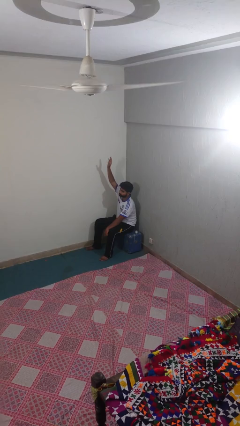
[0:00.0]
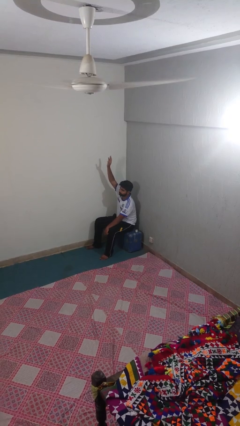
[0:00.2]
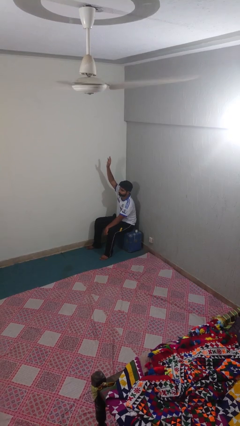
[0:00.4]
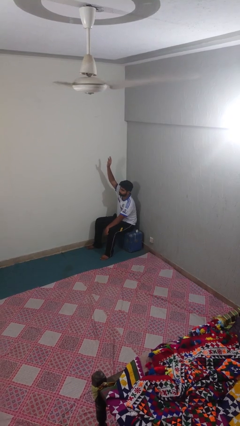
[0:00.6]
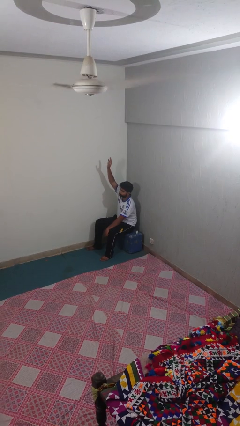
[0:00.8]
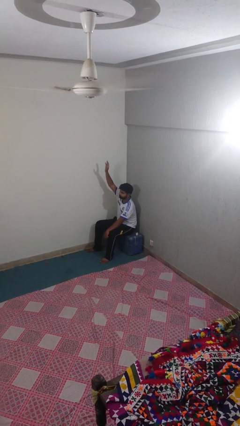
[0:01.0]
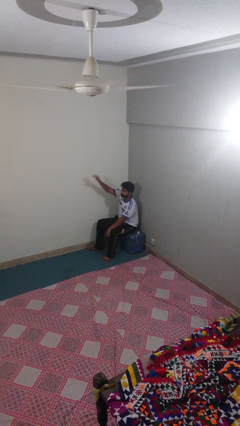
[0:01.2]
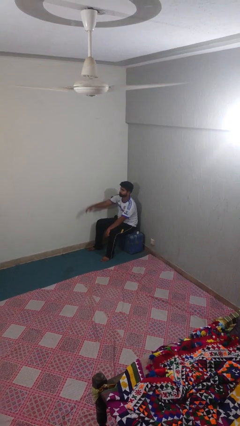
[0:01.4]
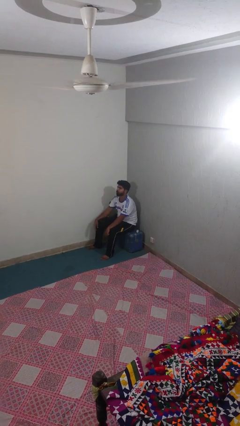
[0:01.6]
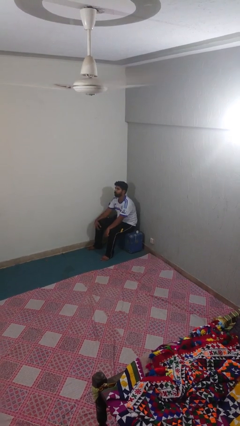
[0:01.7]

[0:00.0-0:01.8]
person gestures lower hand

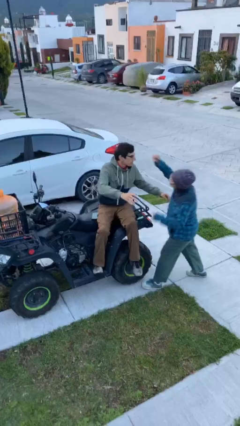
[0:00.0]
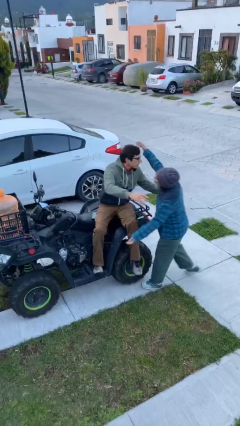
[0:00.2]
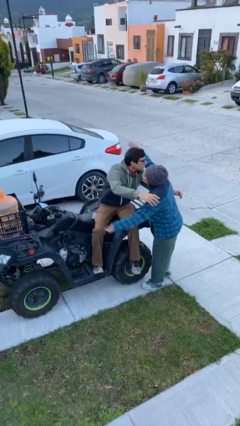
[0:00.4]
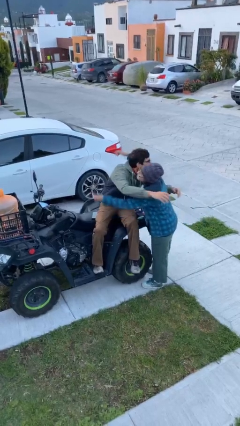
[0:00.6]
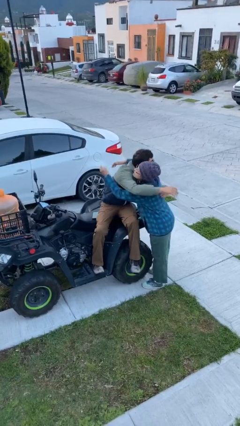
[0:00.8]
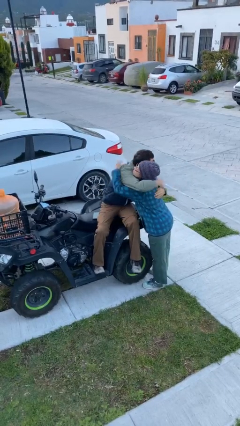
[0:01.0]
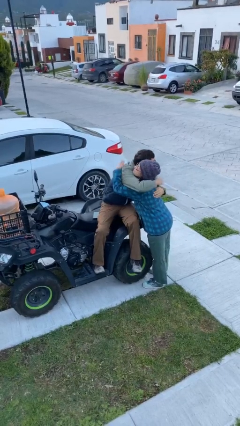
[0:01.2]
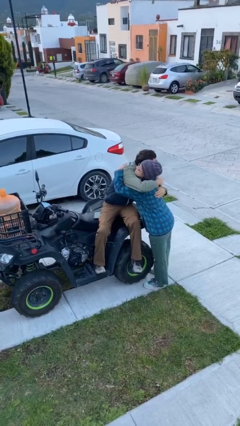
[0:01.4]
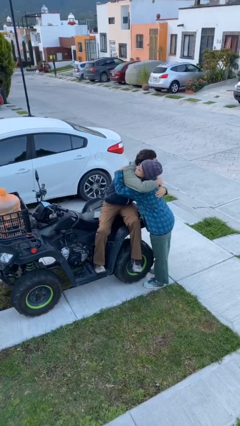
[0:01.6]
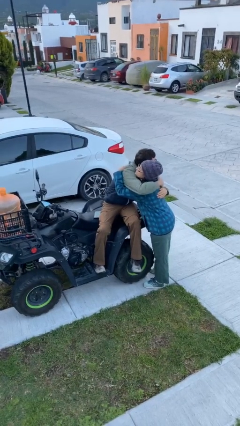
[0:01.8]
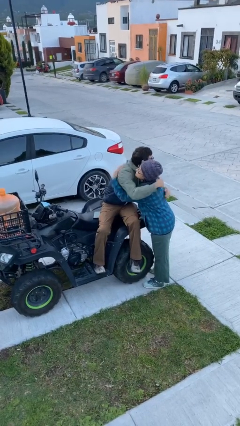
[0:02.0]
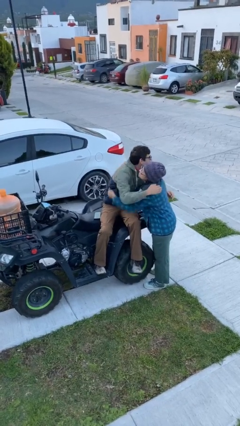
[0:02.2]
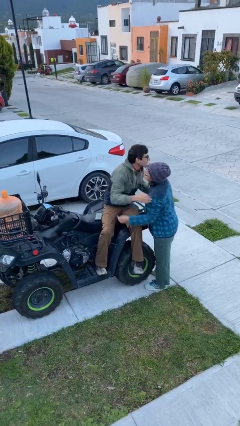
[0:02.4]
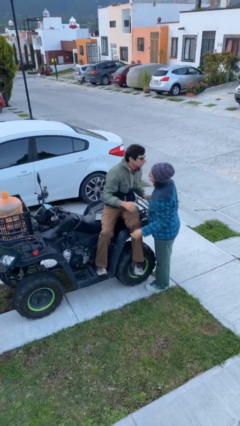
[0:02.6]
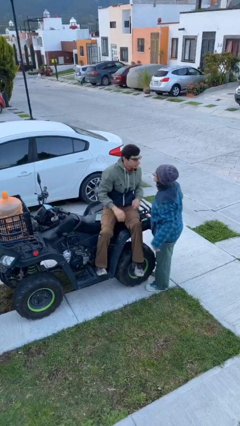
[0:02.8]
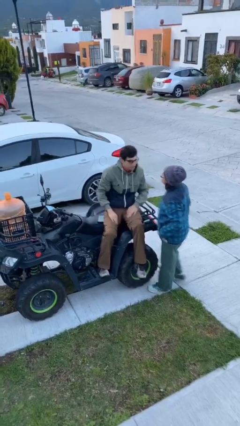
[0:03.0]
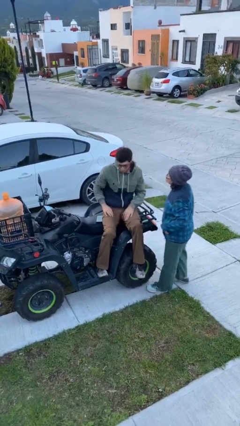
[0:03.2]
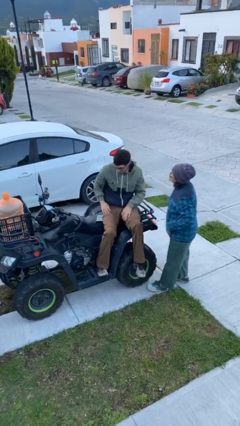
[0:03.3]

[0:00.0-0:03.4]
person embraces person

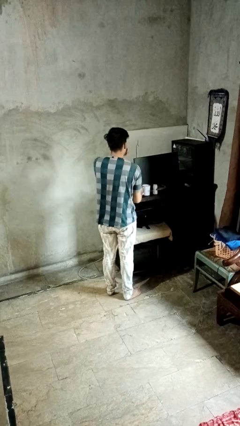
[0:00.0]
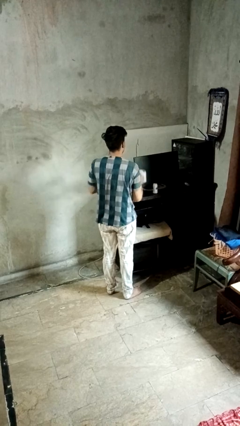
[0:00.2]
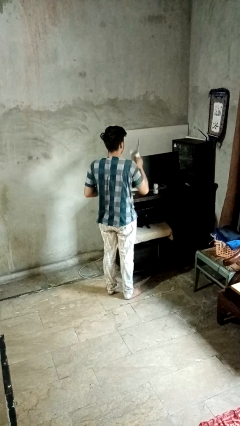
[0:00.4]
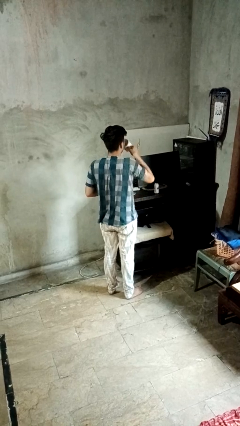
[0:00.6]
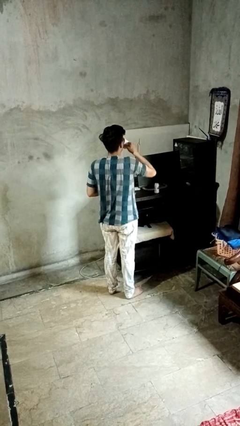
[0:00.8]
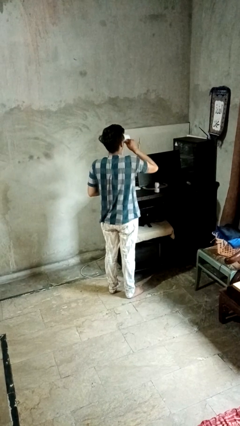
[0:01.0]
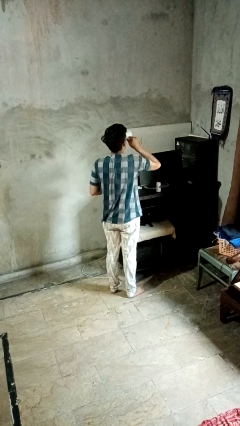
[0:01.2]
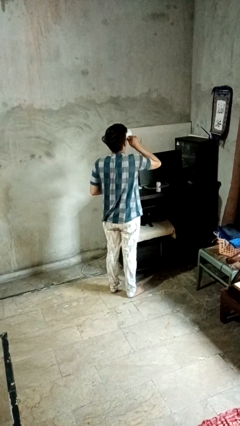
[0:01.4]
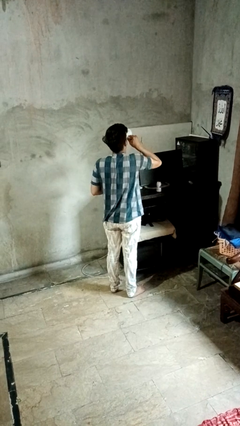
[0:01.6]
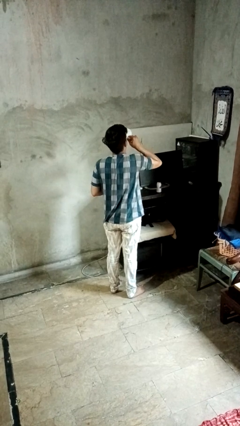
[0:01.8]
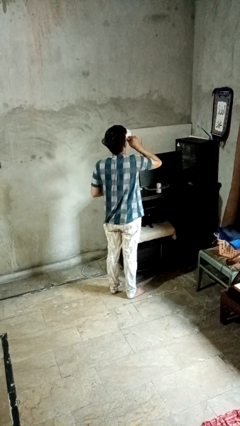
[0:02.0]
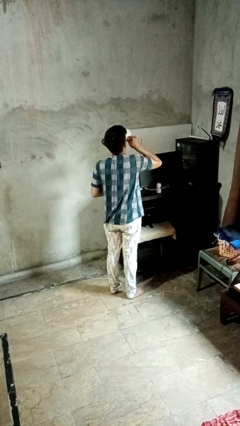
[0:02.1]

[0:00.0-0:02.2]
person drinks from cup

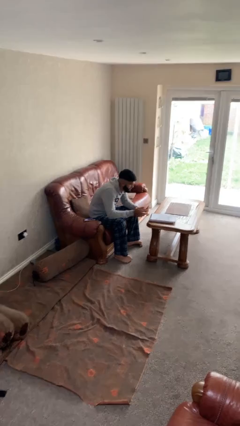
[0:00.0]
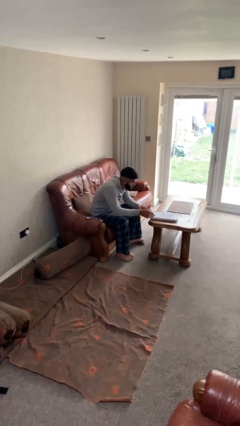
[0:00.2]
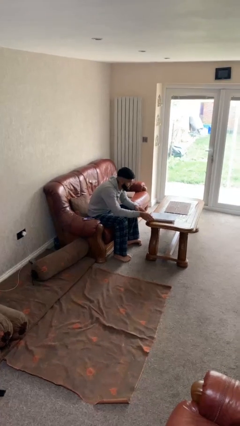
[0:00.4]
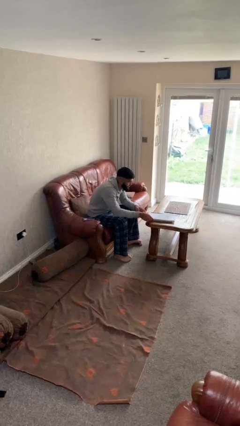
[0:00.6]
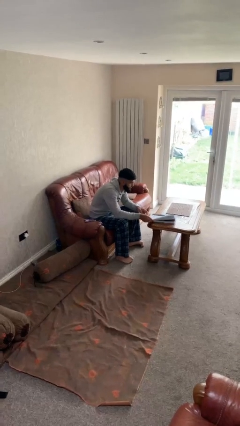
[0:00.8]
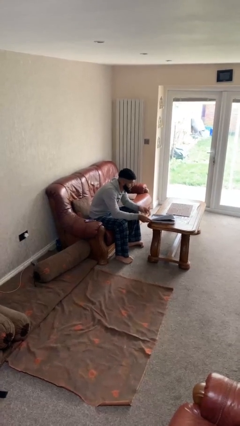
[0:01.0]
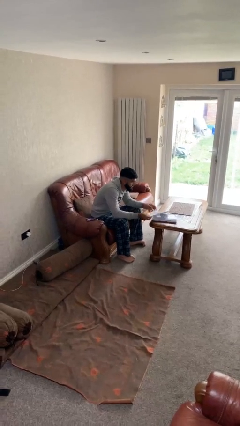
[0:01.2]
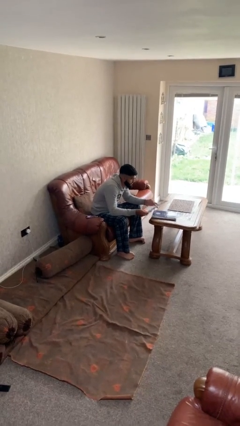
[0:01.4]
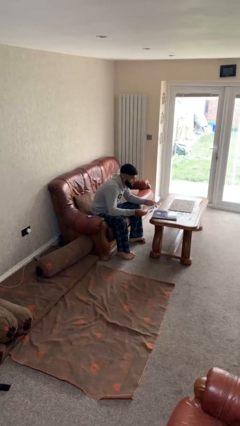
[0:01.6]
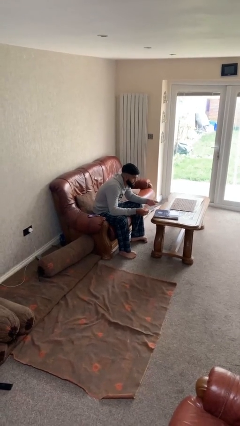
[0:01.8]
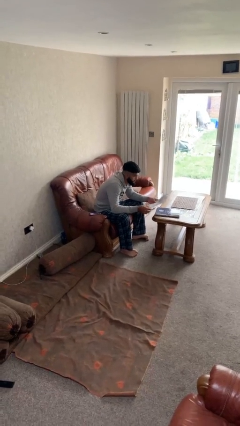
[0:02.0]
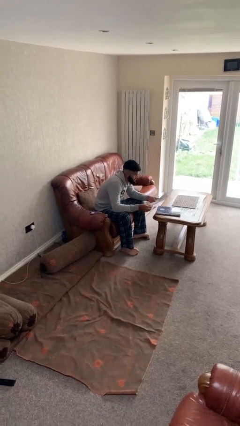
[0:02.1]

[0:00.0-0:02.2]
person picks up object from table

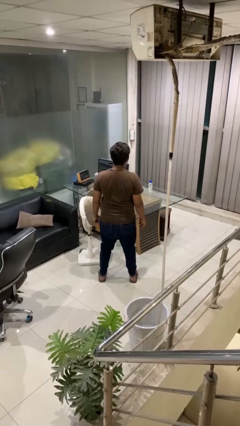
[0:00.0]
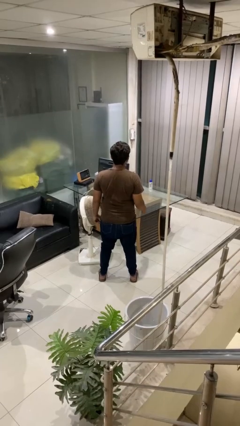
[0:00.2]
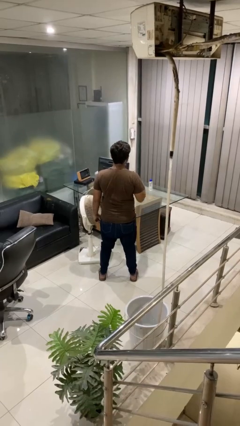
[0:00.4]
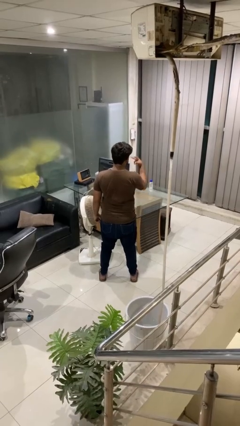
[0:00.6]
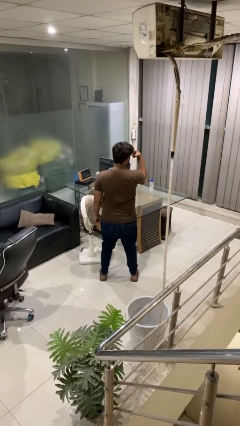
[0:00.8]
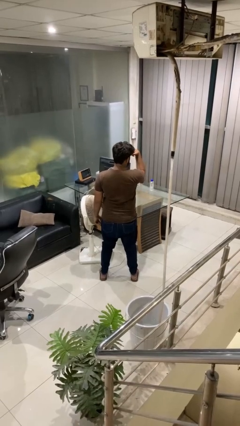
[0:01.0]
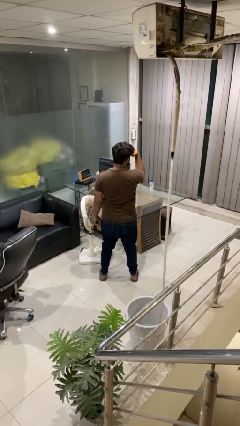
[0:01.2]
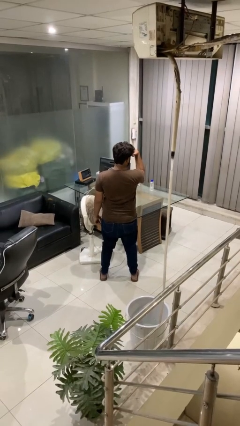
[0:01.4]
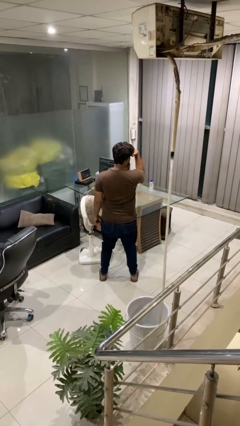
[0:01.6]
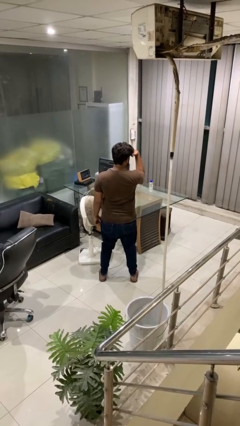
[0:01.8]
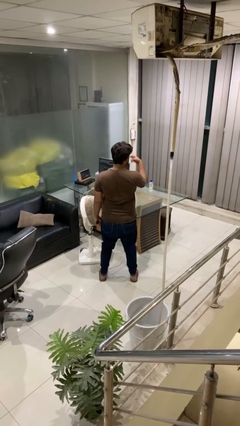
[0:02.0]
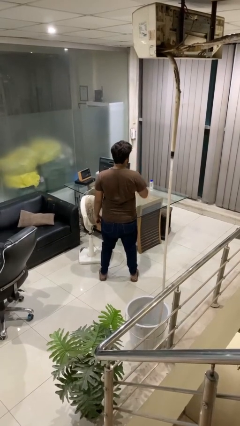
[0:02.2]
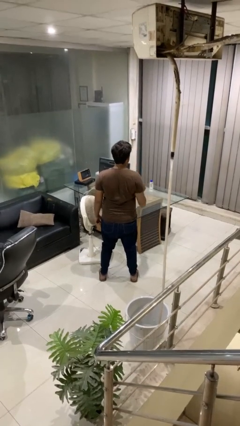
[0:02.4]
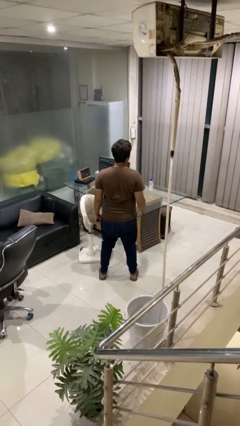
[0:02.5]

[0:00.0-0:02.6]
person gestures watch closely

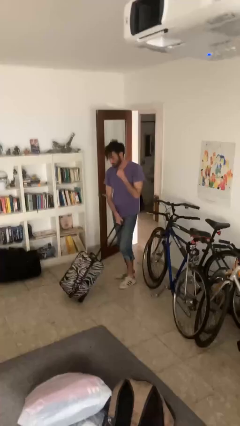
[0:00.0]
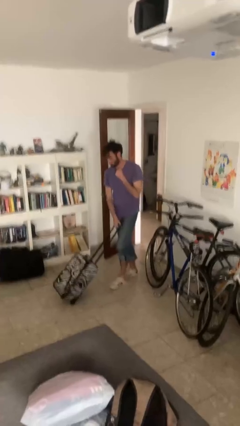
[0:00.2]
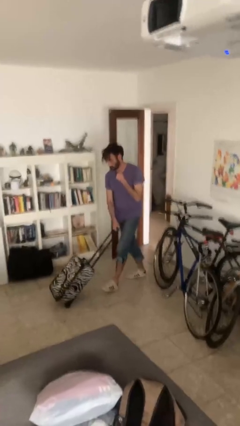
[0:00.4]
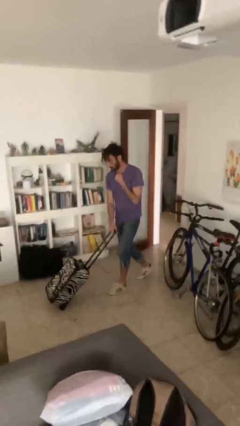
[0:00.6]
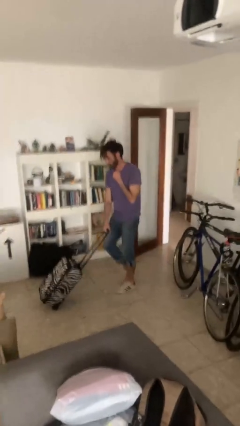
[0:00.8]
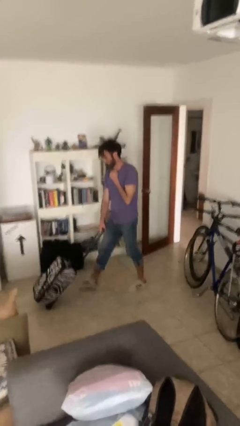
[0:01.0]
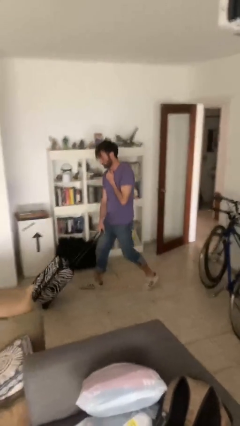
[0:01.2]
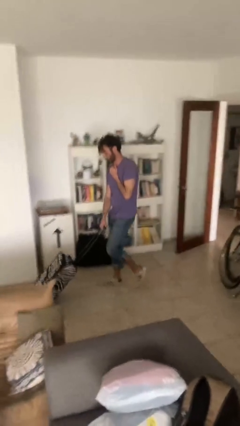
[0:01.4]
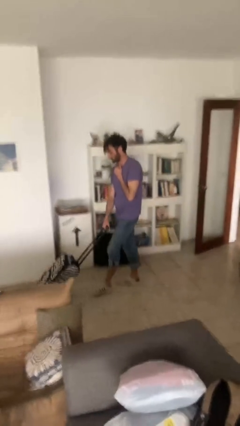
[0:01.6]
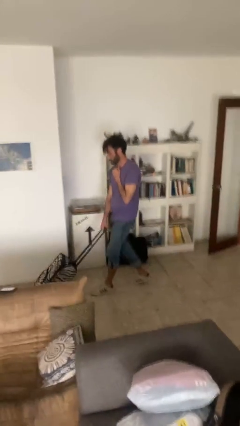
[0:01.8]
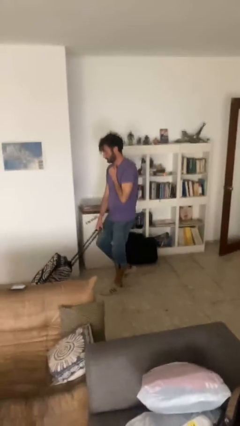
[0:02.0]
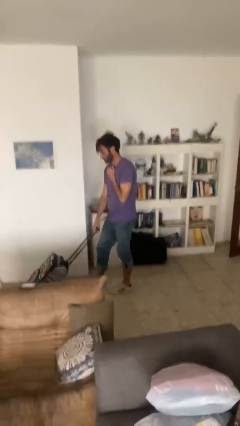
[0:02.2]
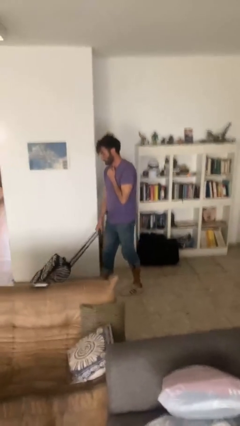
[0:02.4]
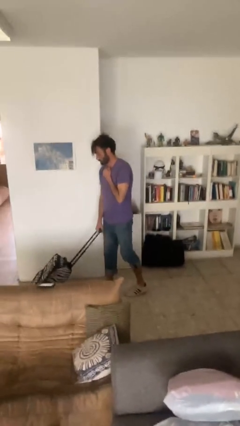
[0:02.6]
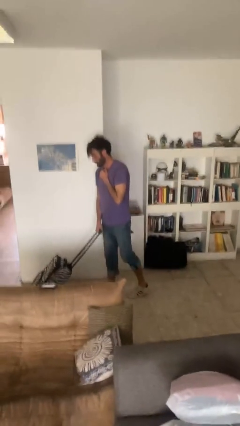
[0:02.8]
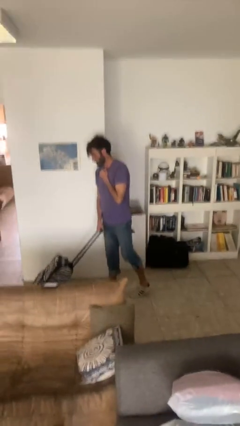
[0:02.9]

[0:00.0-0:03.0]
person pushes wheeled cart

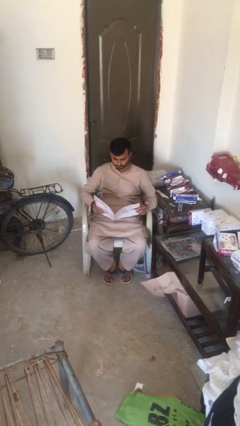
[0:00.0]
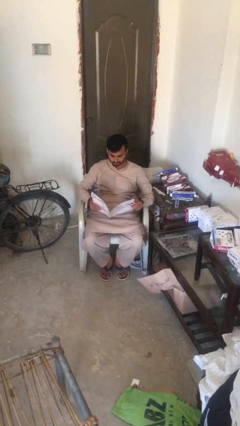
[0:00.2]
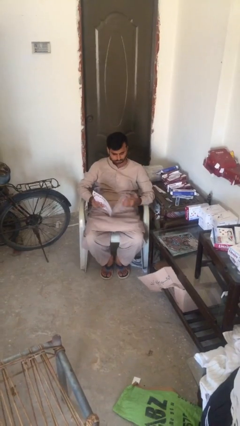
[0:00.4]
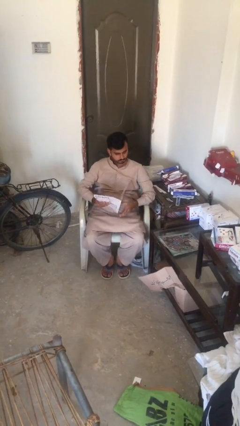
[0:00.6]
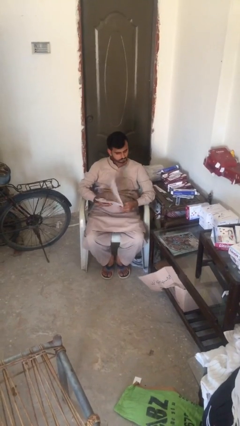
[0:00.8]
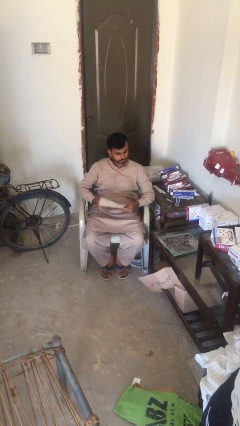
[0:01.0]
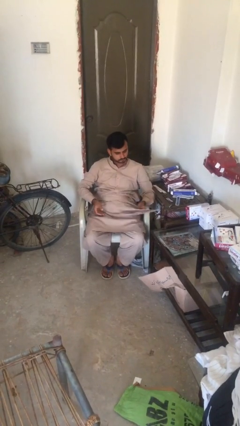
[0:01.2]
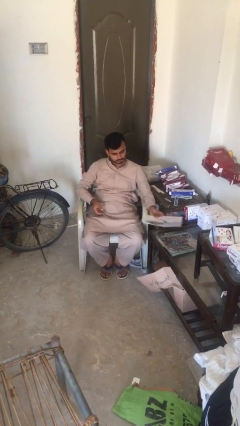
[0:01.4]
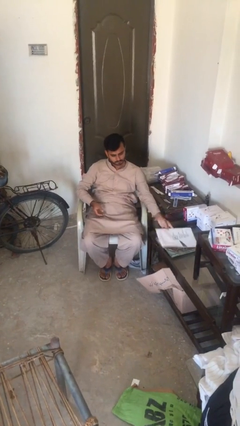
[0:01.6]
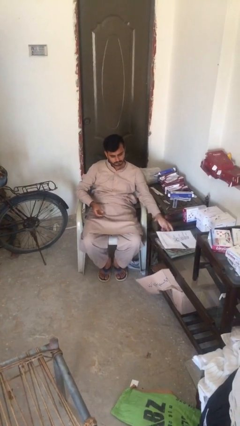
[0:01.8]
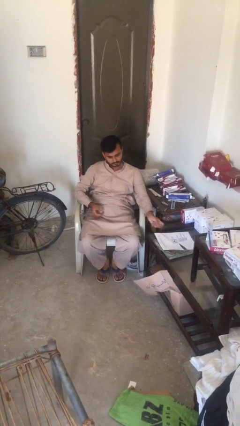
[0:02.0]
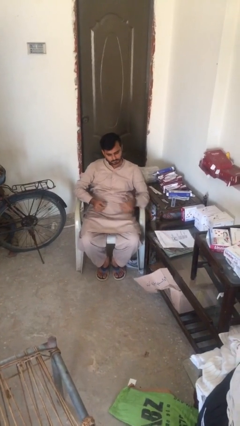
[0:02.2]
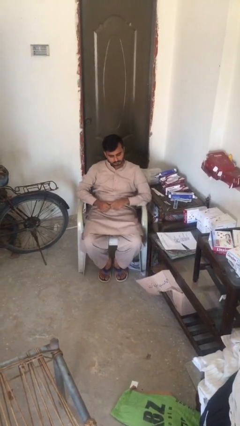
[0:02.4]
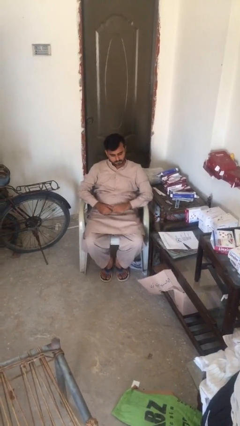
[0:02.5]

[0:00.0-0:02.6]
person puts down object on table
